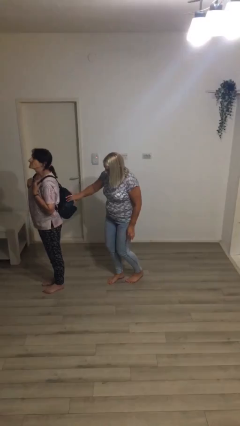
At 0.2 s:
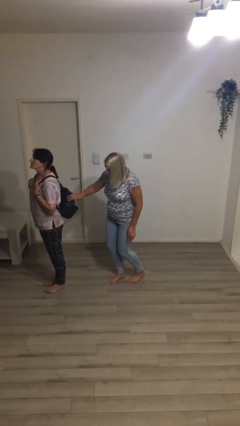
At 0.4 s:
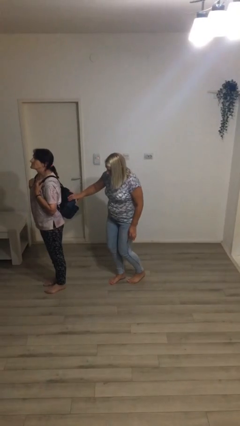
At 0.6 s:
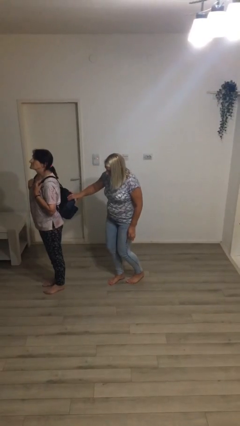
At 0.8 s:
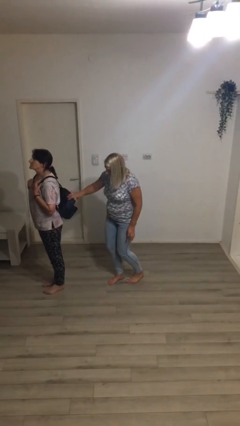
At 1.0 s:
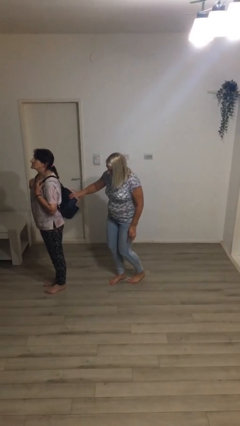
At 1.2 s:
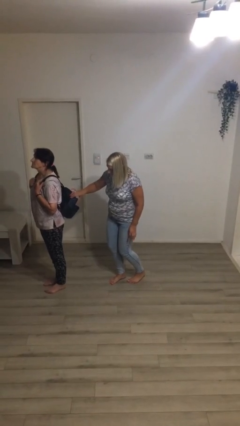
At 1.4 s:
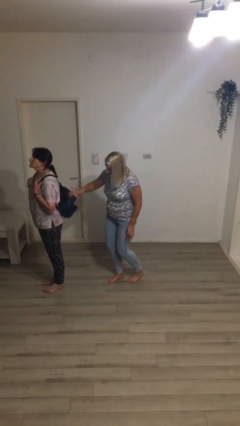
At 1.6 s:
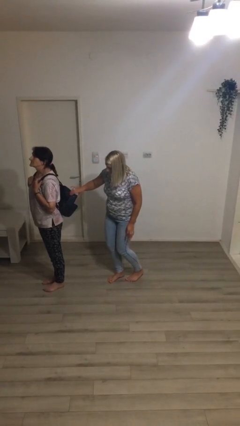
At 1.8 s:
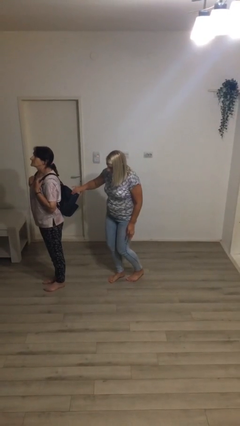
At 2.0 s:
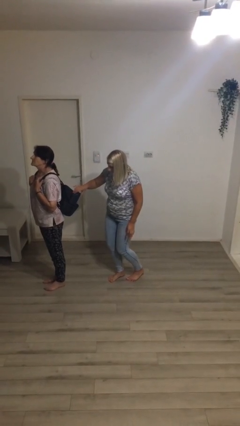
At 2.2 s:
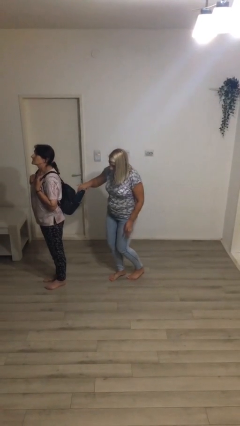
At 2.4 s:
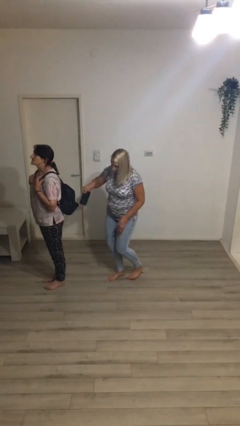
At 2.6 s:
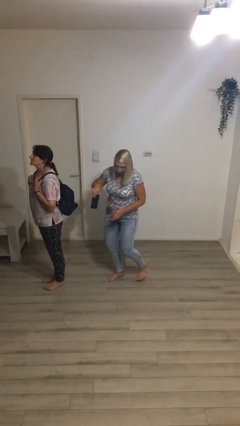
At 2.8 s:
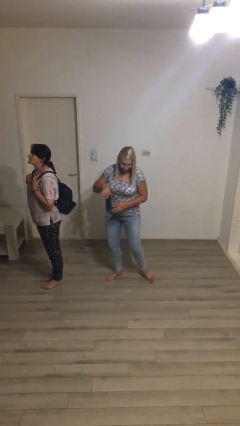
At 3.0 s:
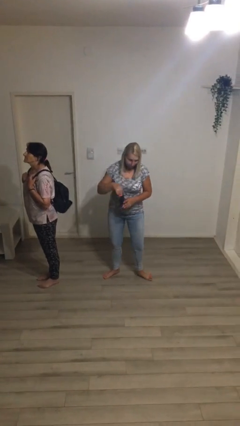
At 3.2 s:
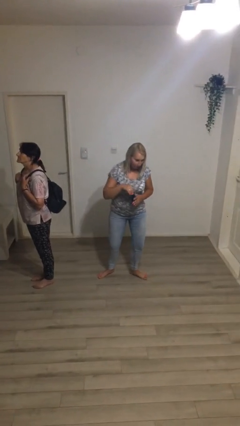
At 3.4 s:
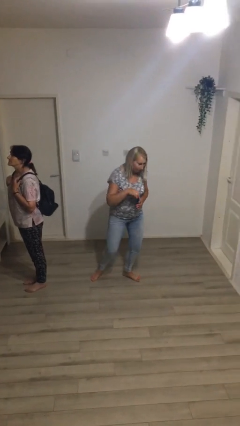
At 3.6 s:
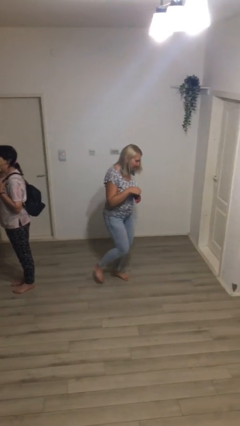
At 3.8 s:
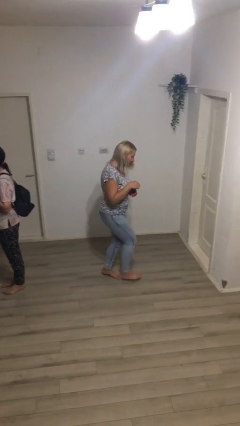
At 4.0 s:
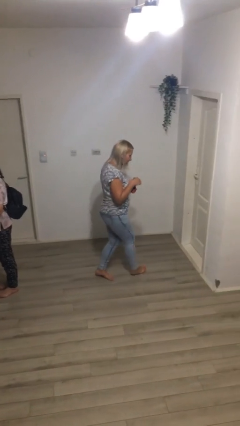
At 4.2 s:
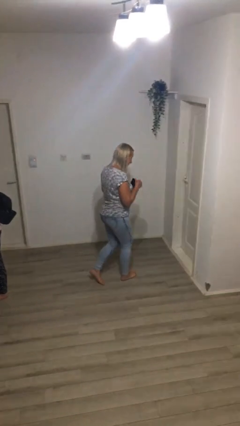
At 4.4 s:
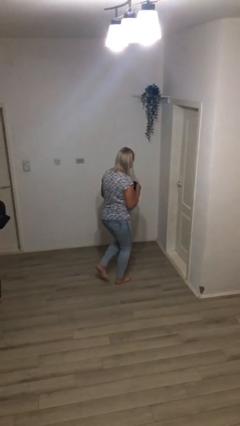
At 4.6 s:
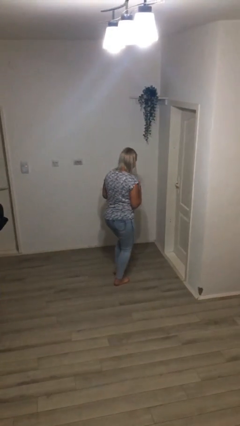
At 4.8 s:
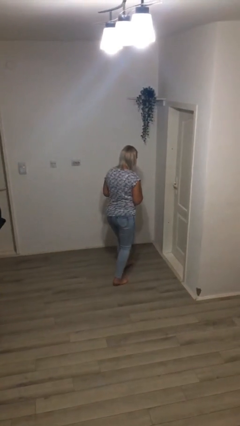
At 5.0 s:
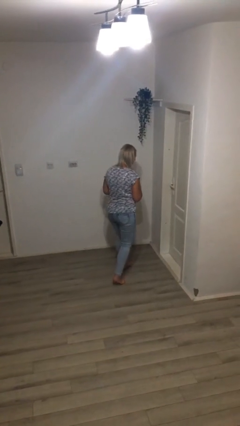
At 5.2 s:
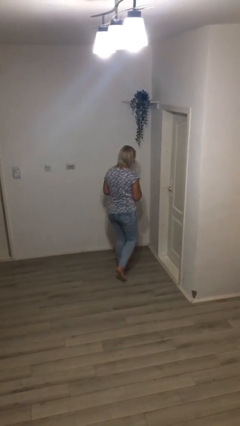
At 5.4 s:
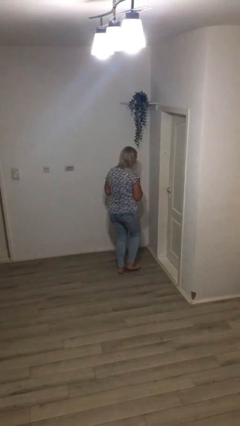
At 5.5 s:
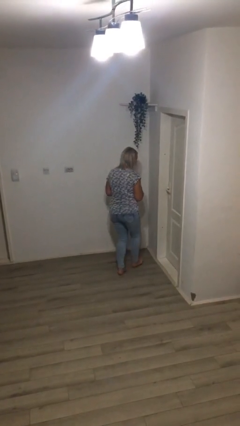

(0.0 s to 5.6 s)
person steals object from person

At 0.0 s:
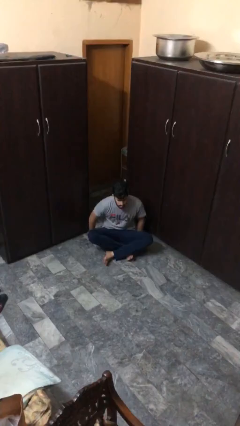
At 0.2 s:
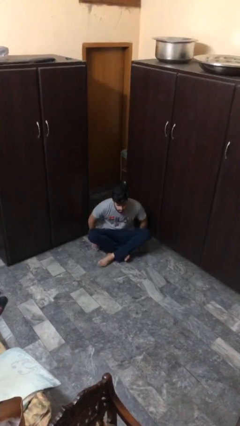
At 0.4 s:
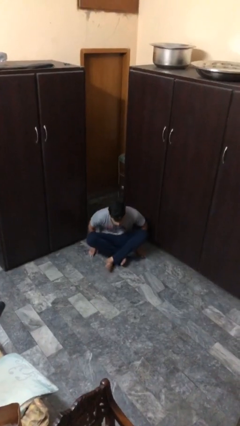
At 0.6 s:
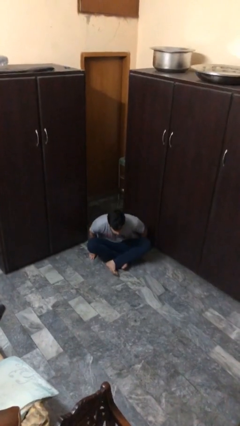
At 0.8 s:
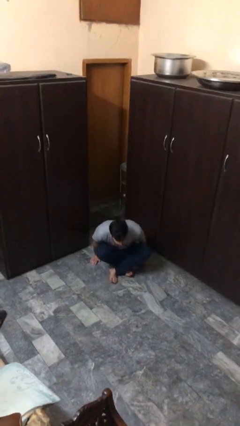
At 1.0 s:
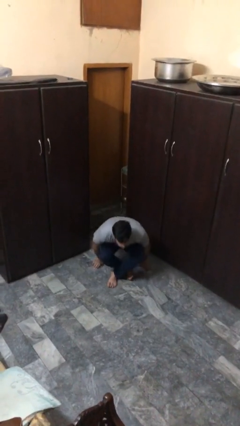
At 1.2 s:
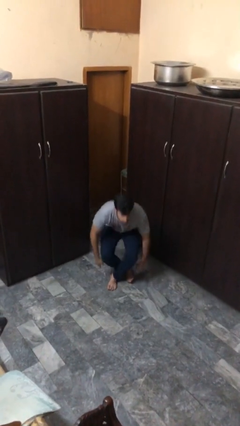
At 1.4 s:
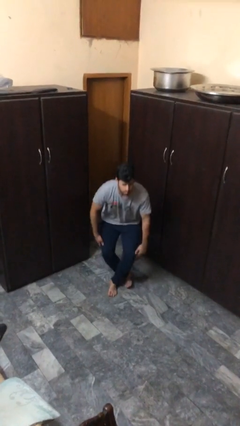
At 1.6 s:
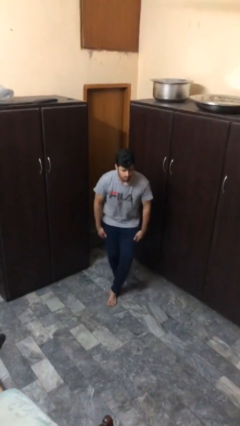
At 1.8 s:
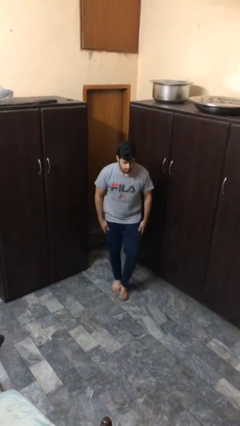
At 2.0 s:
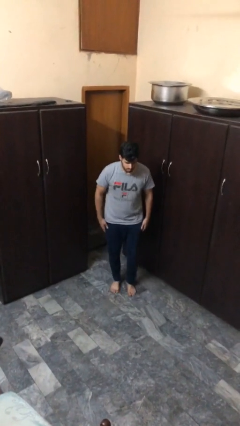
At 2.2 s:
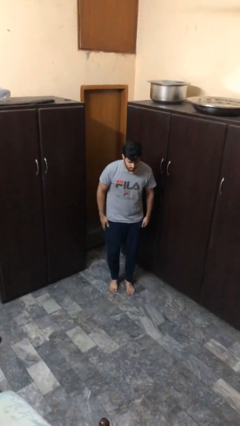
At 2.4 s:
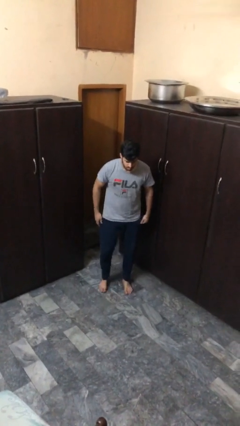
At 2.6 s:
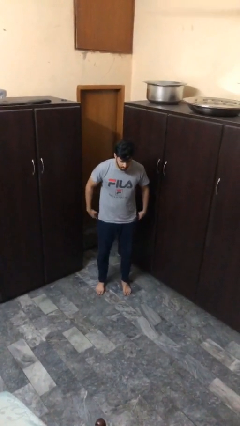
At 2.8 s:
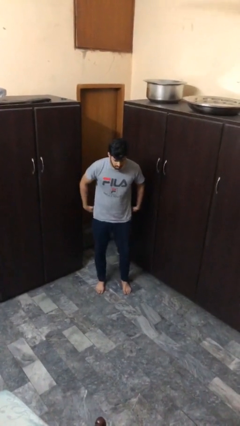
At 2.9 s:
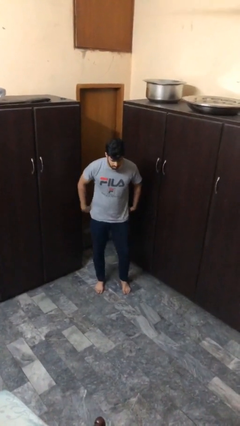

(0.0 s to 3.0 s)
person stands up from floor

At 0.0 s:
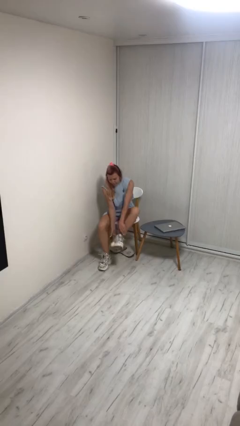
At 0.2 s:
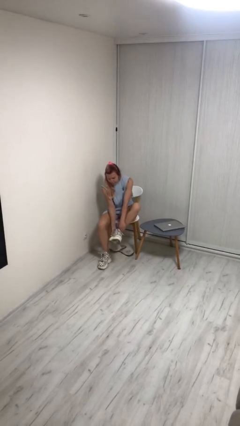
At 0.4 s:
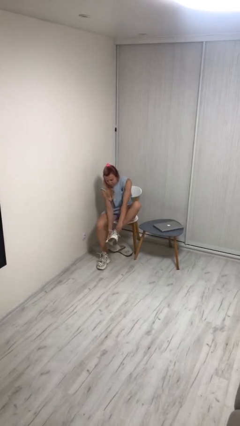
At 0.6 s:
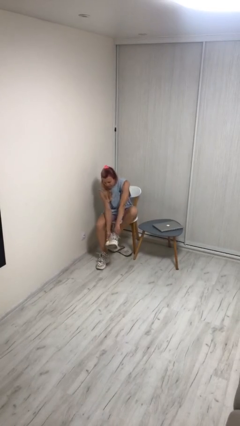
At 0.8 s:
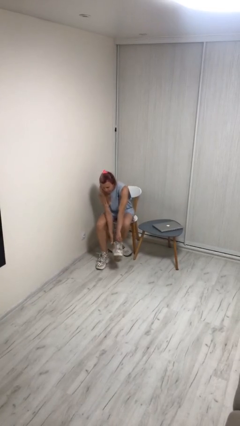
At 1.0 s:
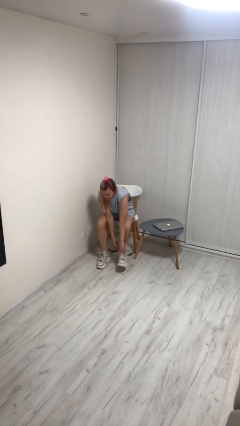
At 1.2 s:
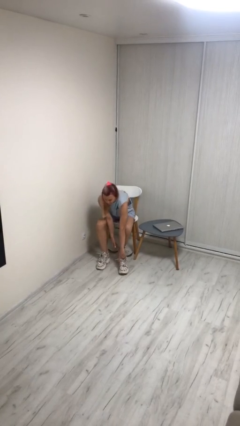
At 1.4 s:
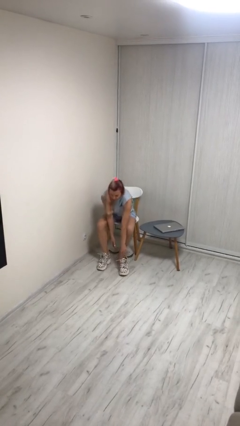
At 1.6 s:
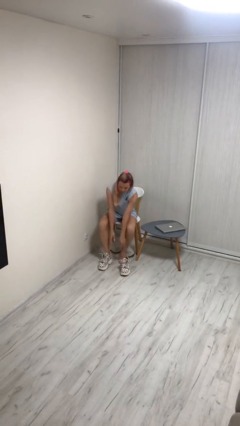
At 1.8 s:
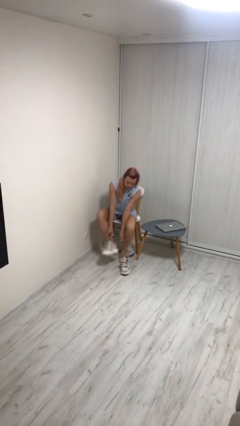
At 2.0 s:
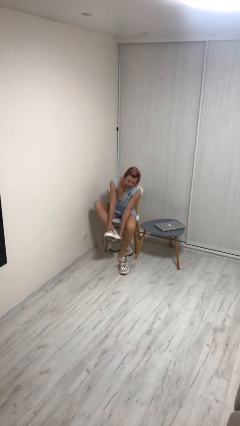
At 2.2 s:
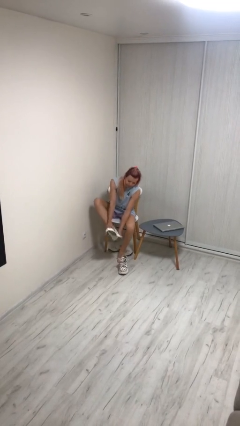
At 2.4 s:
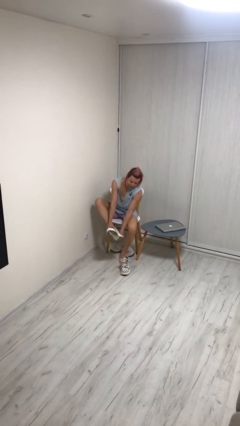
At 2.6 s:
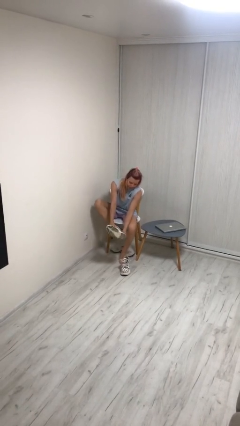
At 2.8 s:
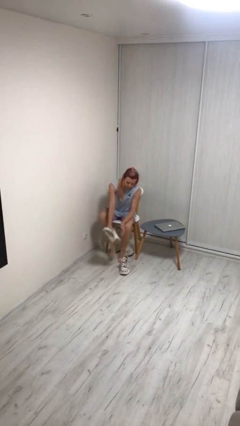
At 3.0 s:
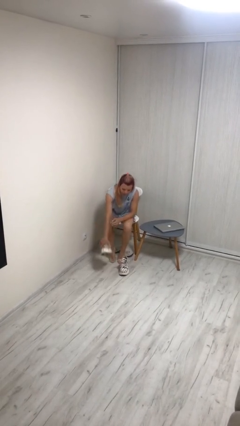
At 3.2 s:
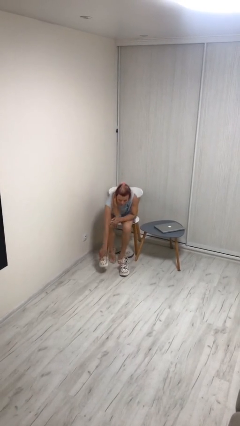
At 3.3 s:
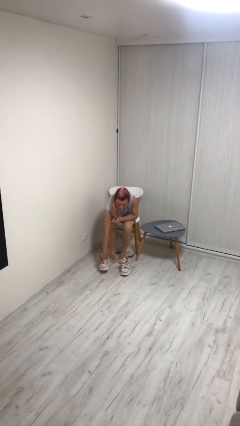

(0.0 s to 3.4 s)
person takes off boots

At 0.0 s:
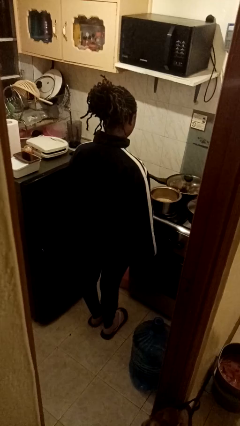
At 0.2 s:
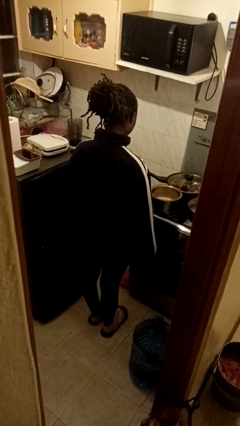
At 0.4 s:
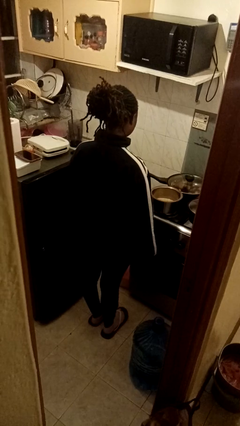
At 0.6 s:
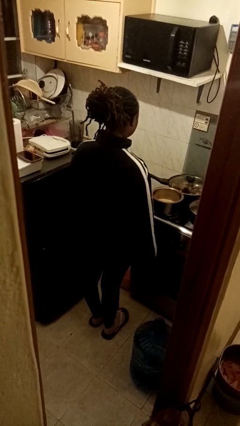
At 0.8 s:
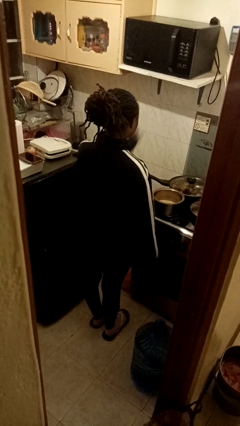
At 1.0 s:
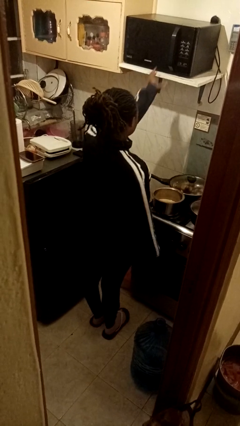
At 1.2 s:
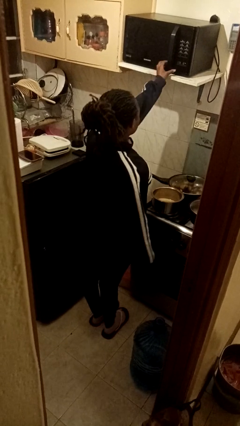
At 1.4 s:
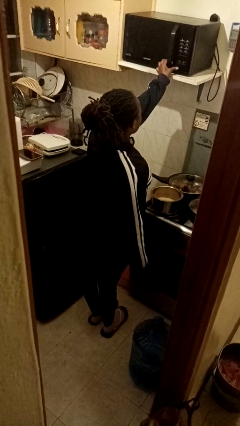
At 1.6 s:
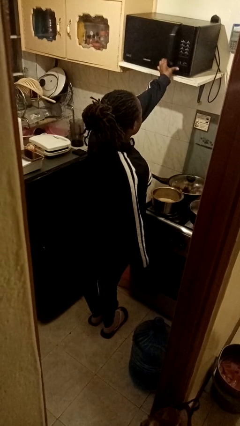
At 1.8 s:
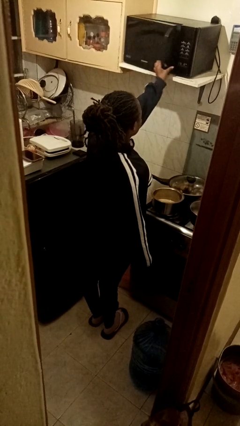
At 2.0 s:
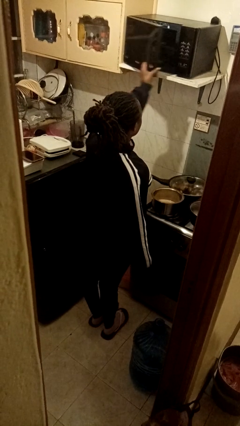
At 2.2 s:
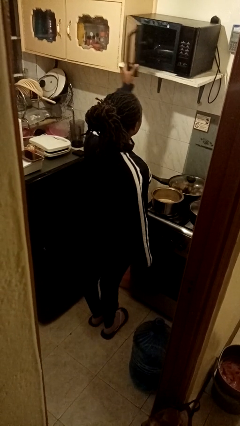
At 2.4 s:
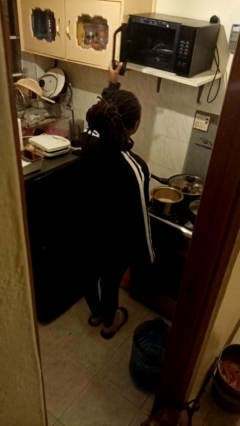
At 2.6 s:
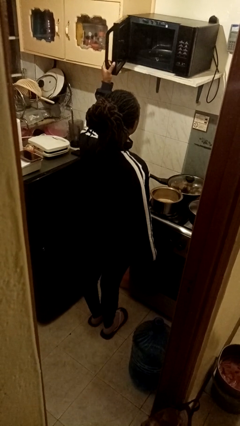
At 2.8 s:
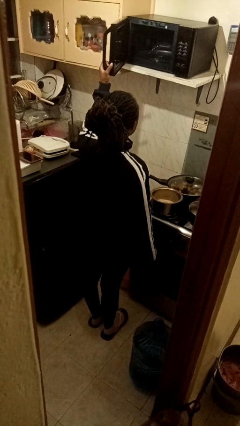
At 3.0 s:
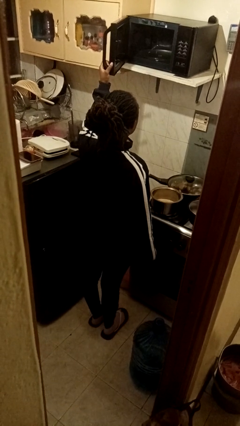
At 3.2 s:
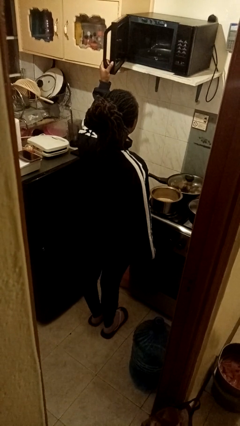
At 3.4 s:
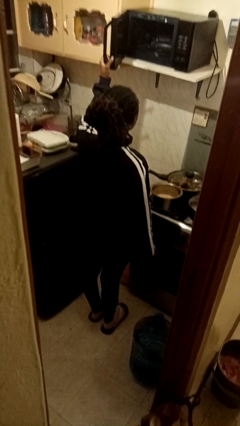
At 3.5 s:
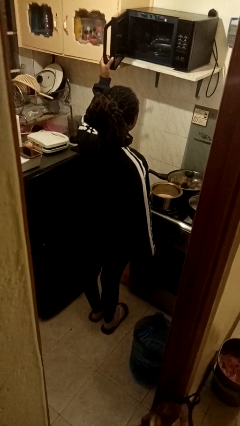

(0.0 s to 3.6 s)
person opens microwave

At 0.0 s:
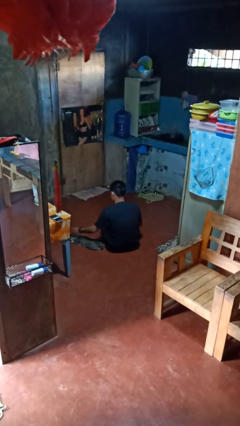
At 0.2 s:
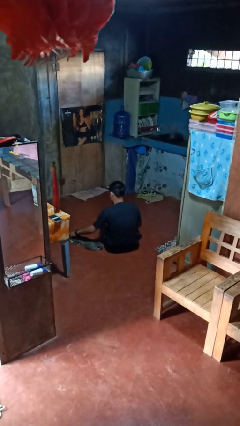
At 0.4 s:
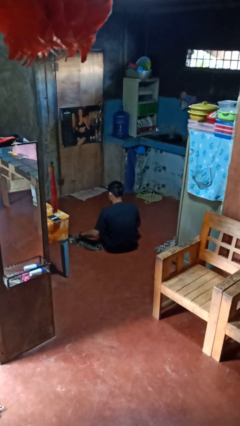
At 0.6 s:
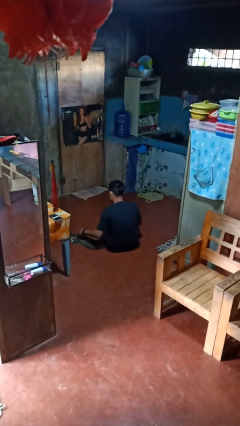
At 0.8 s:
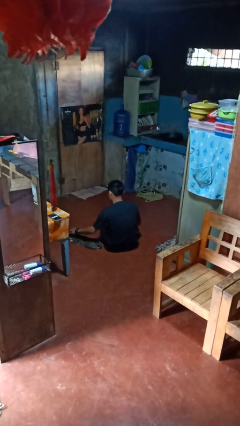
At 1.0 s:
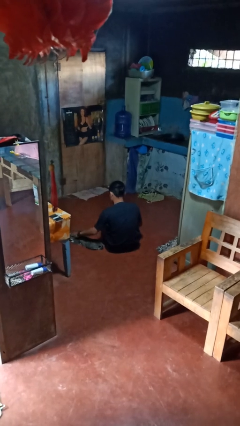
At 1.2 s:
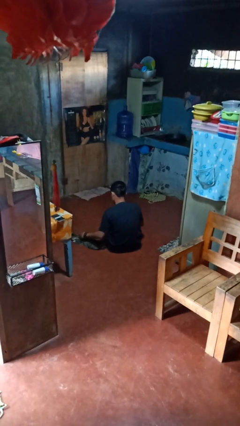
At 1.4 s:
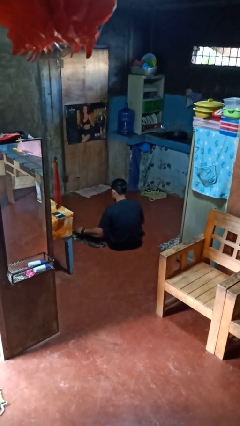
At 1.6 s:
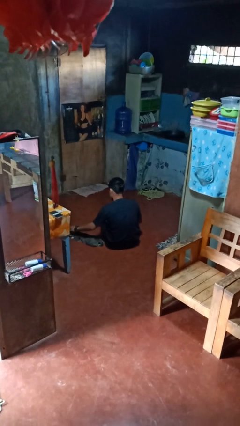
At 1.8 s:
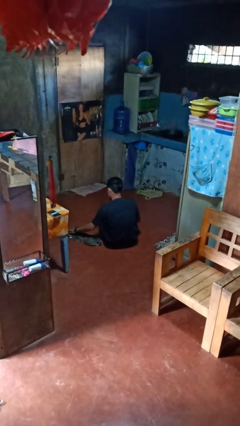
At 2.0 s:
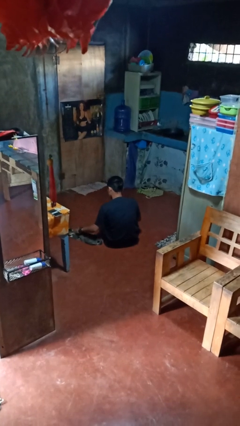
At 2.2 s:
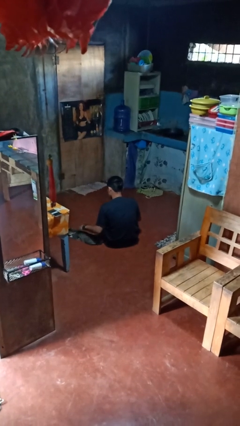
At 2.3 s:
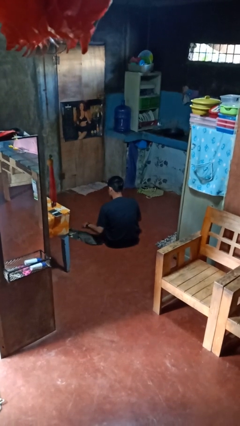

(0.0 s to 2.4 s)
person pets cat
